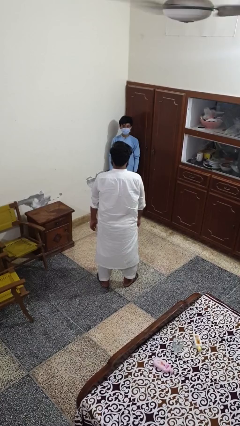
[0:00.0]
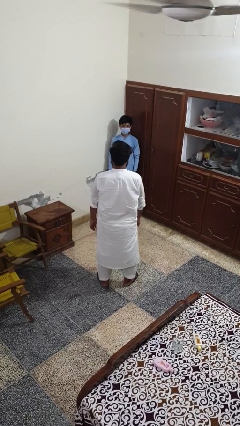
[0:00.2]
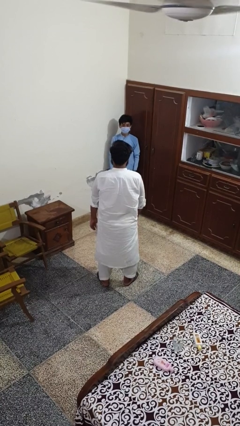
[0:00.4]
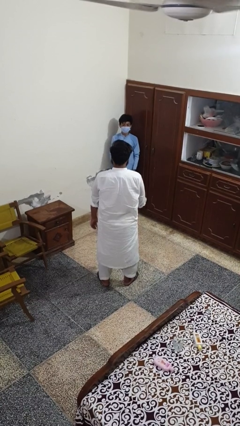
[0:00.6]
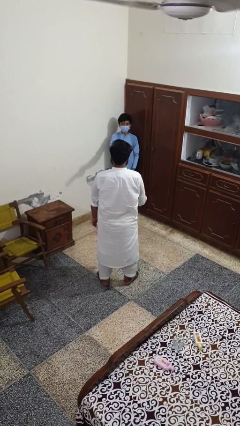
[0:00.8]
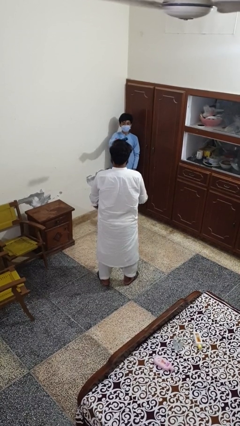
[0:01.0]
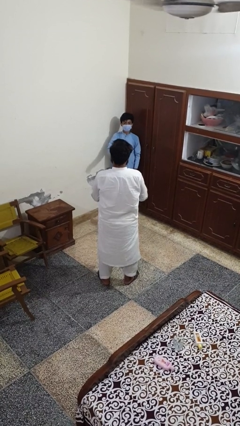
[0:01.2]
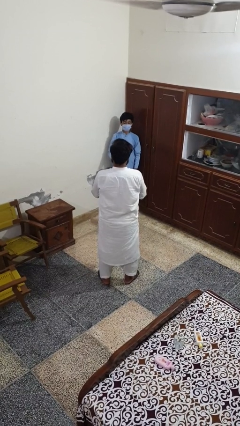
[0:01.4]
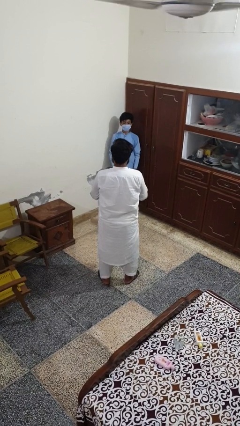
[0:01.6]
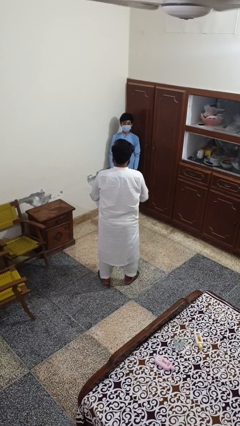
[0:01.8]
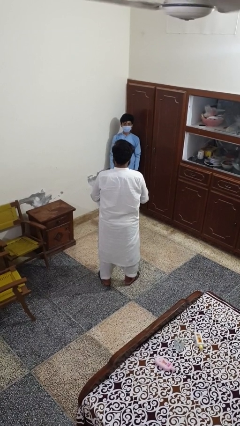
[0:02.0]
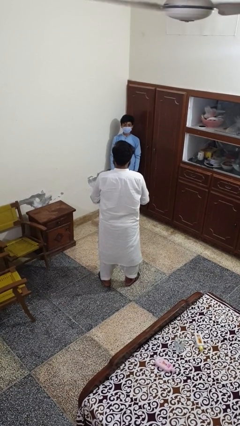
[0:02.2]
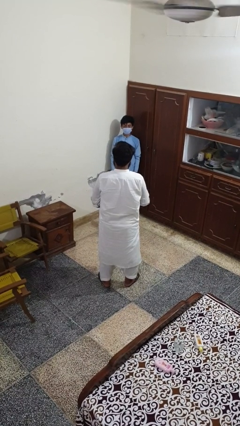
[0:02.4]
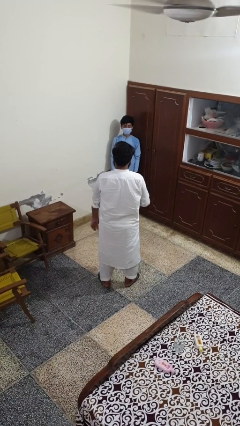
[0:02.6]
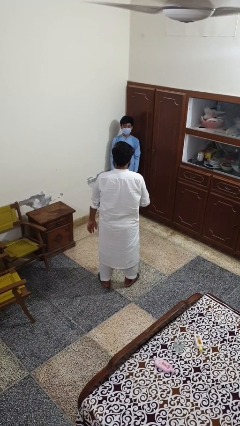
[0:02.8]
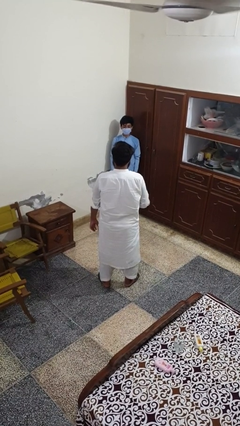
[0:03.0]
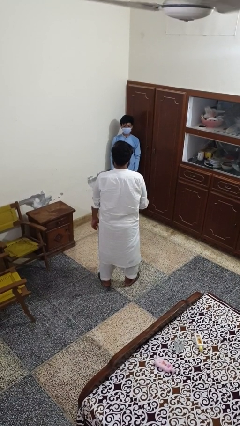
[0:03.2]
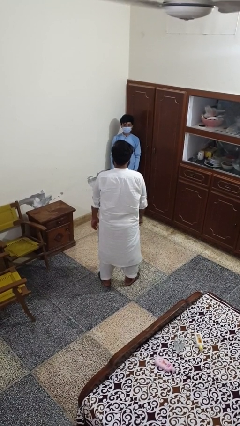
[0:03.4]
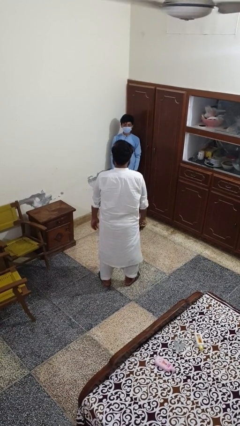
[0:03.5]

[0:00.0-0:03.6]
person catches object from person

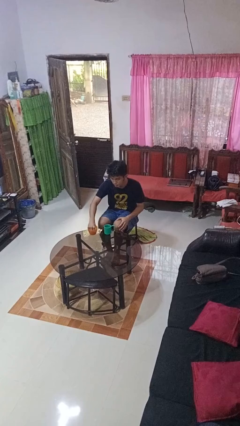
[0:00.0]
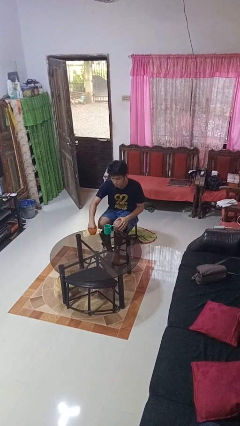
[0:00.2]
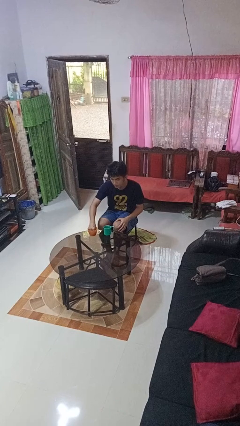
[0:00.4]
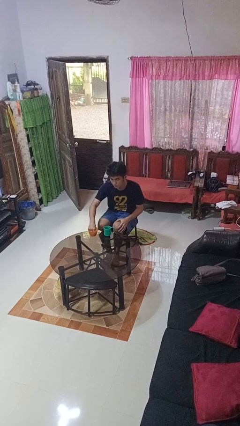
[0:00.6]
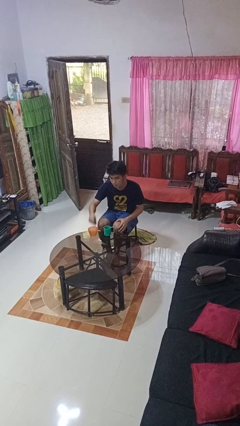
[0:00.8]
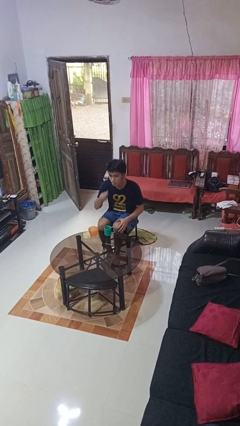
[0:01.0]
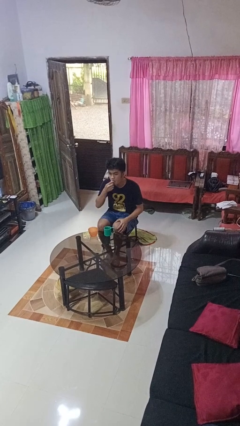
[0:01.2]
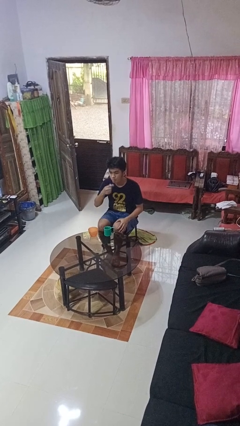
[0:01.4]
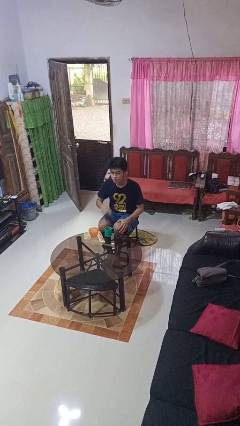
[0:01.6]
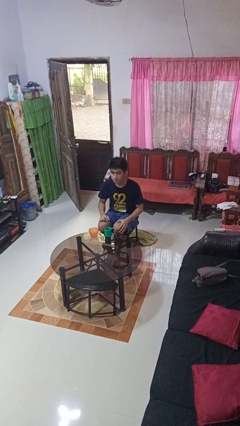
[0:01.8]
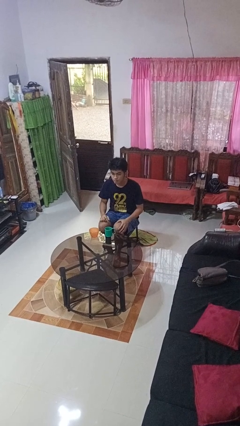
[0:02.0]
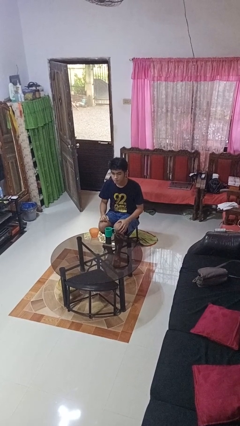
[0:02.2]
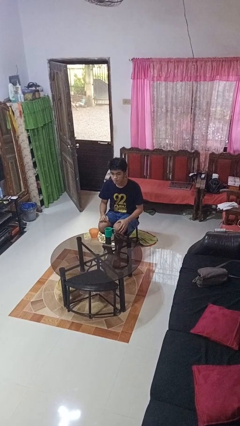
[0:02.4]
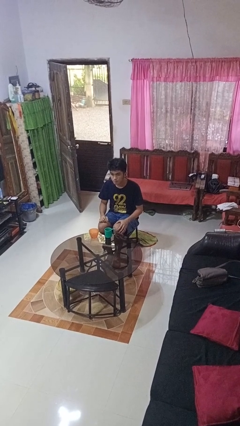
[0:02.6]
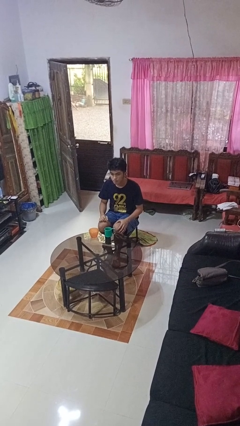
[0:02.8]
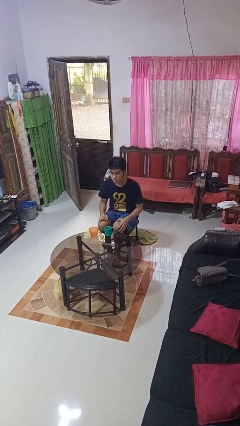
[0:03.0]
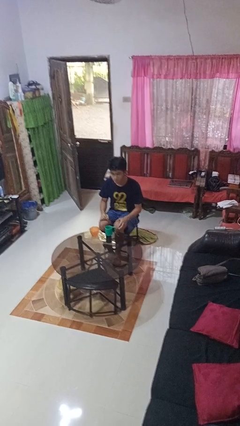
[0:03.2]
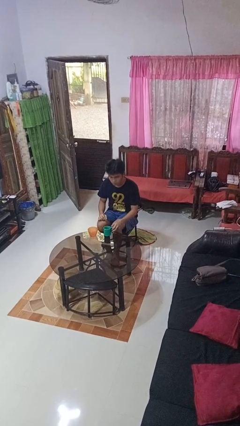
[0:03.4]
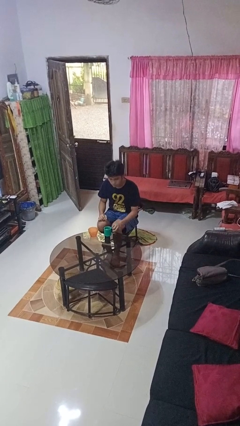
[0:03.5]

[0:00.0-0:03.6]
person takes medicine pills

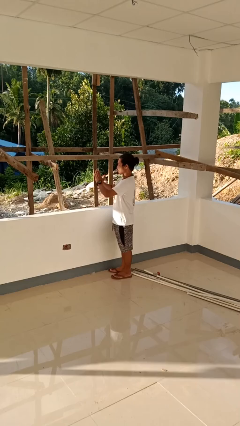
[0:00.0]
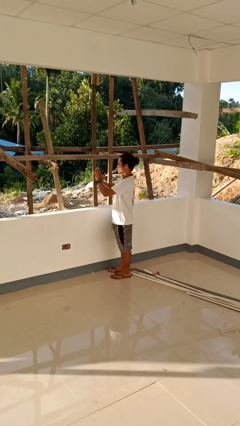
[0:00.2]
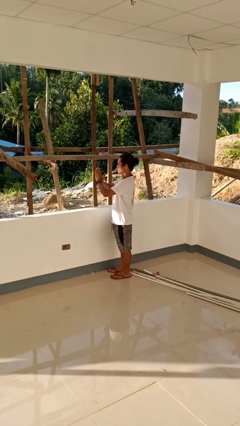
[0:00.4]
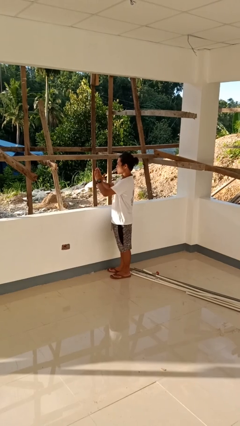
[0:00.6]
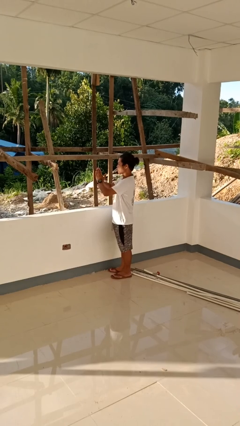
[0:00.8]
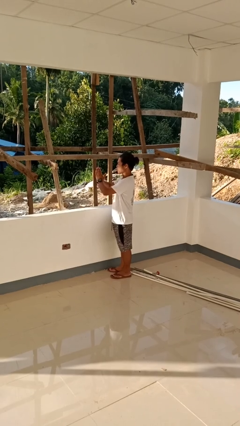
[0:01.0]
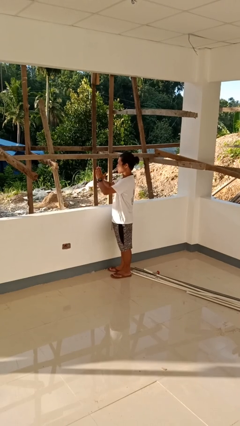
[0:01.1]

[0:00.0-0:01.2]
person prays

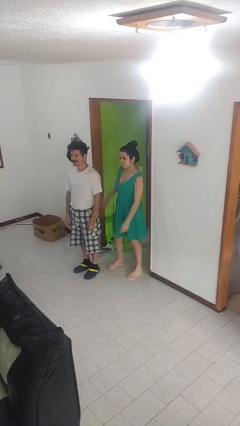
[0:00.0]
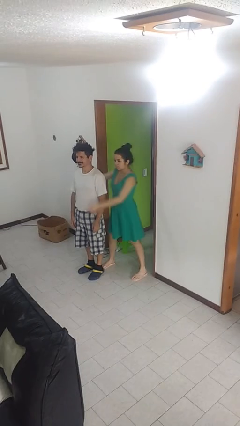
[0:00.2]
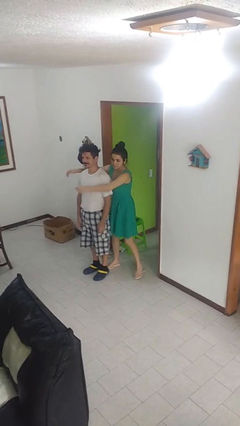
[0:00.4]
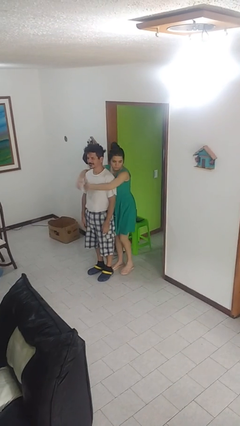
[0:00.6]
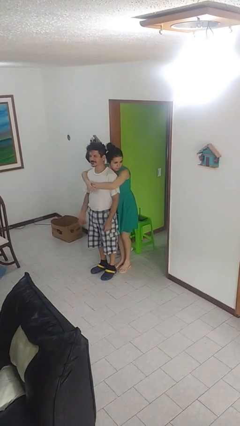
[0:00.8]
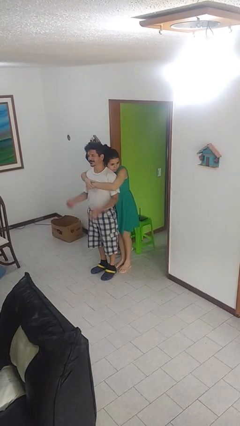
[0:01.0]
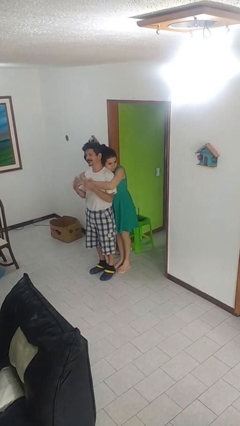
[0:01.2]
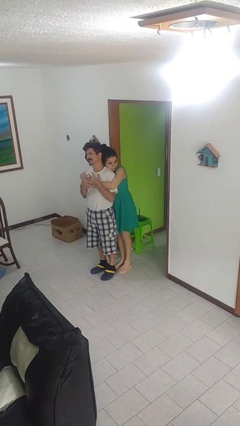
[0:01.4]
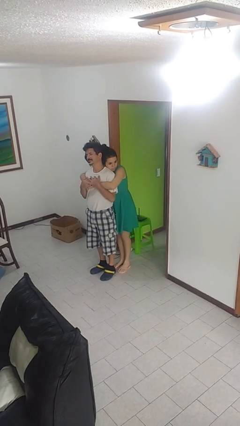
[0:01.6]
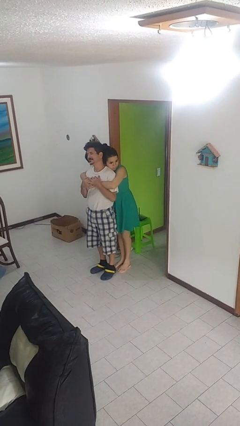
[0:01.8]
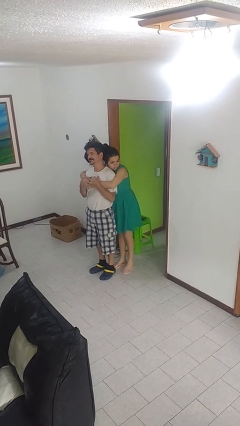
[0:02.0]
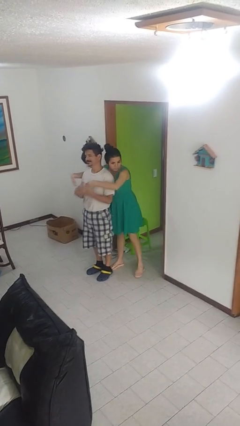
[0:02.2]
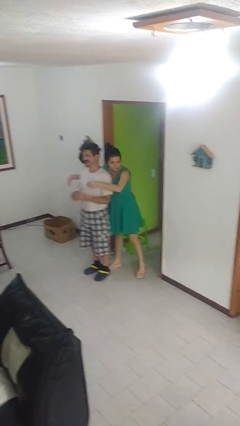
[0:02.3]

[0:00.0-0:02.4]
person hugs person from behind

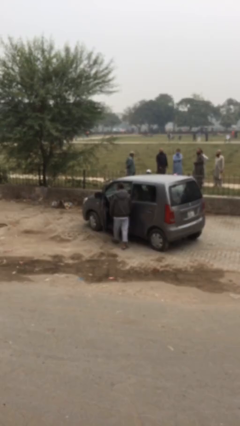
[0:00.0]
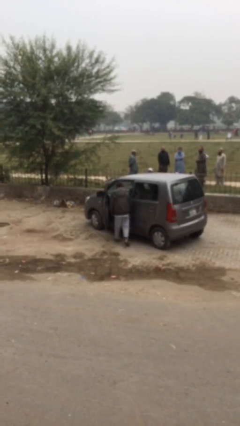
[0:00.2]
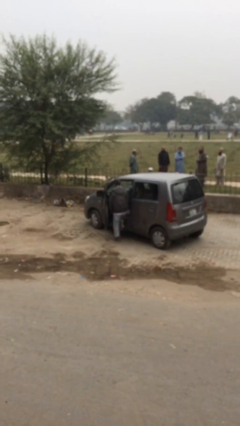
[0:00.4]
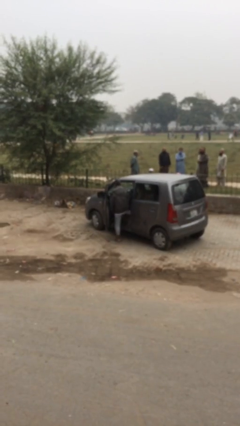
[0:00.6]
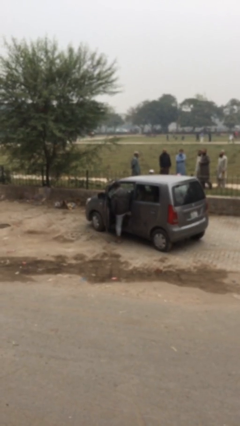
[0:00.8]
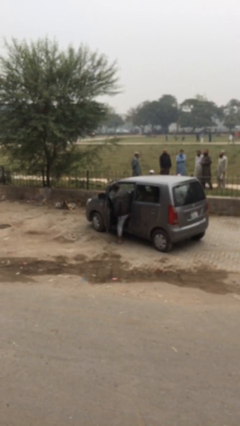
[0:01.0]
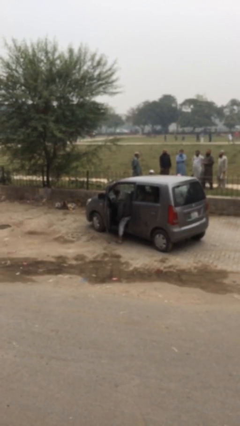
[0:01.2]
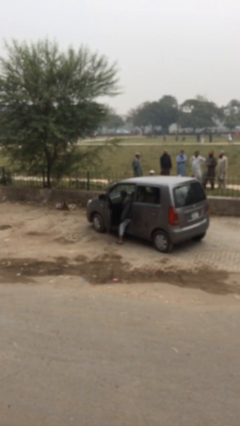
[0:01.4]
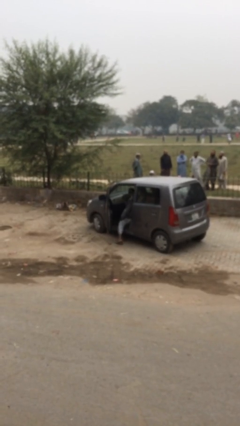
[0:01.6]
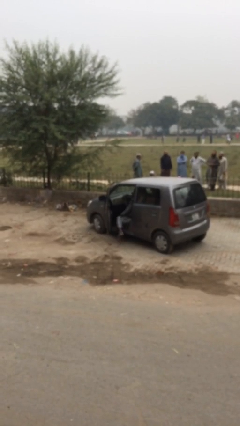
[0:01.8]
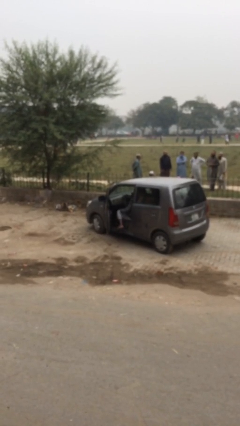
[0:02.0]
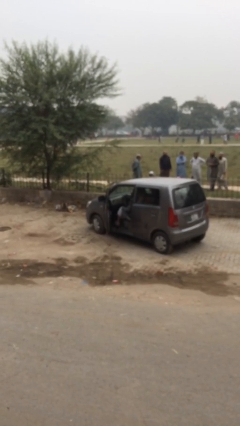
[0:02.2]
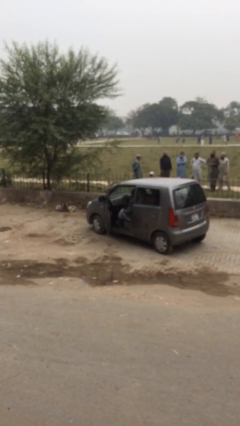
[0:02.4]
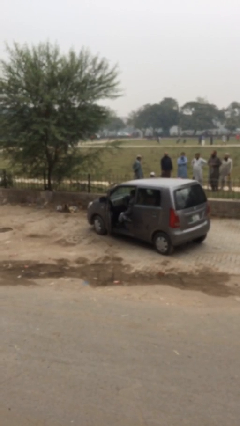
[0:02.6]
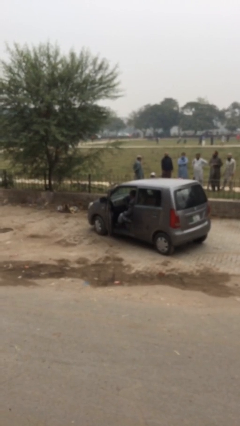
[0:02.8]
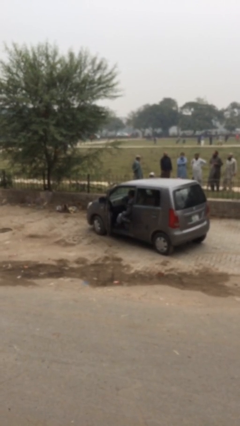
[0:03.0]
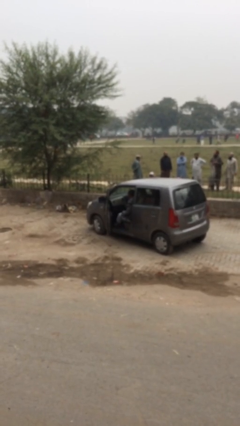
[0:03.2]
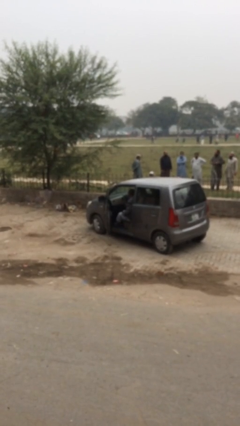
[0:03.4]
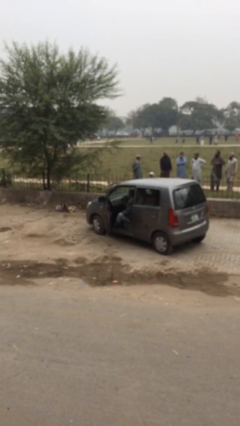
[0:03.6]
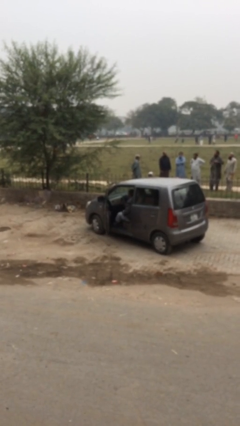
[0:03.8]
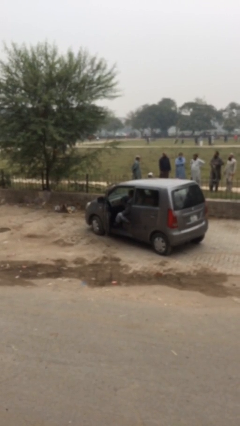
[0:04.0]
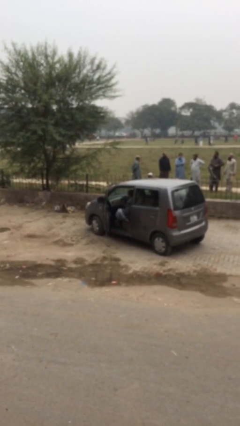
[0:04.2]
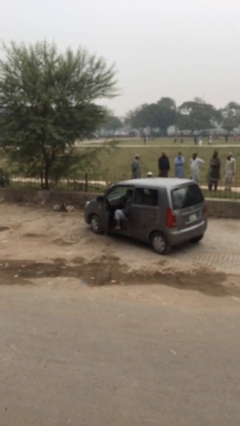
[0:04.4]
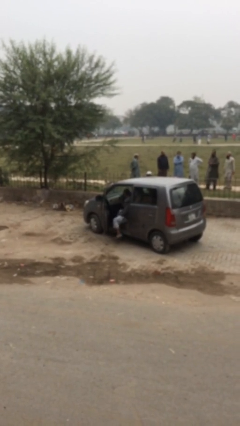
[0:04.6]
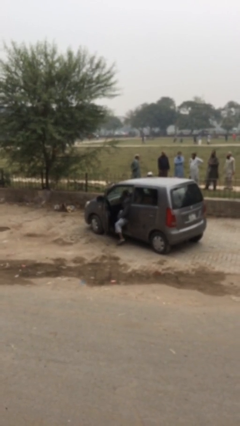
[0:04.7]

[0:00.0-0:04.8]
person enters car

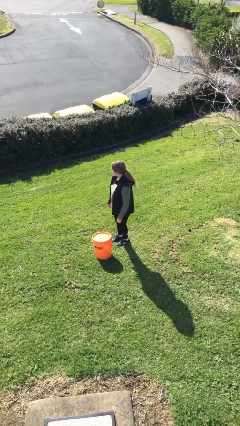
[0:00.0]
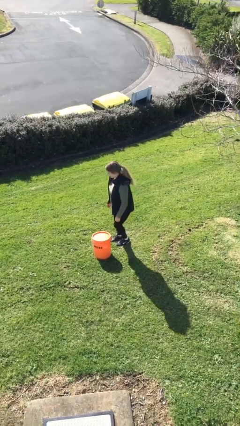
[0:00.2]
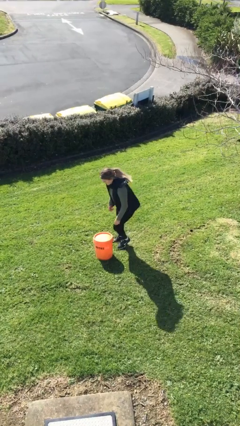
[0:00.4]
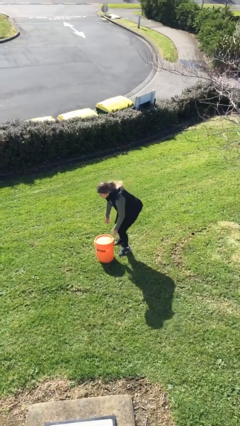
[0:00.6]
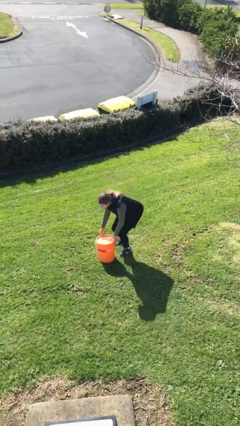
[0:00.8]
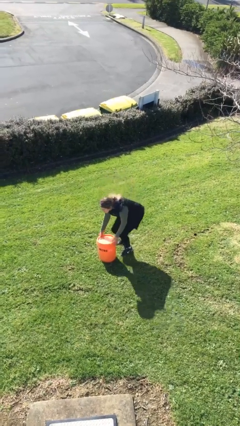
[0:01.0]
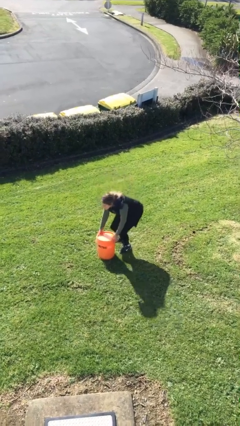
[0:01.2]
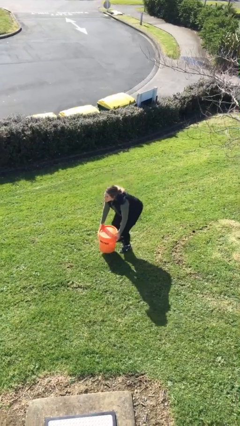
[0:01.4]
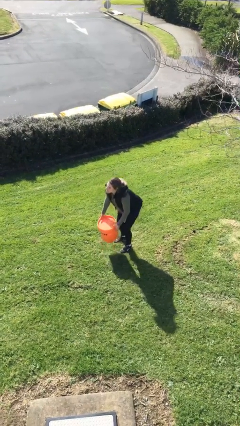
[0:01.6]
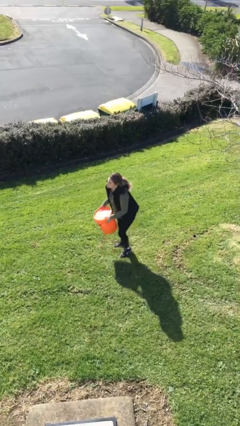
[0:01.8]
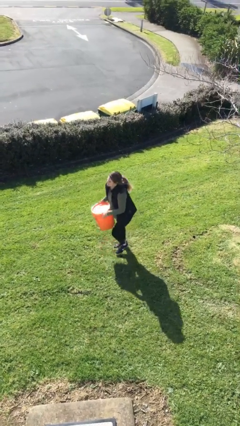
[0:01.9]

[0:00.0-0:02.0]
person picks up object from floor
